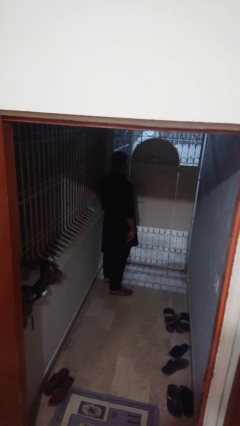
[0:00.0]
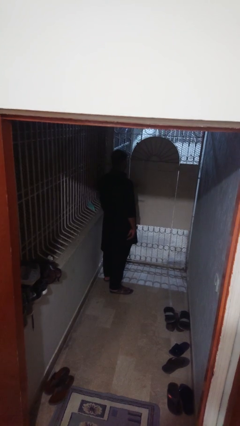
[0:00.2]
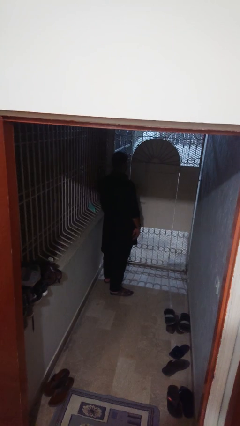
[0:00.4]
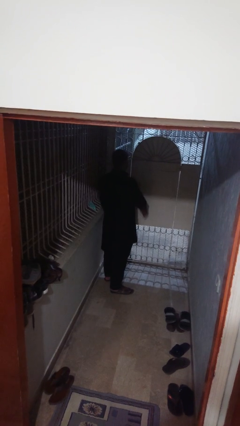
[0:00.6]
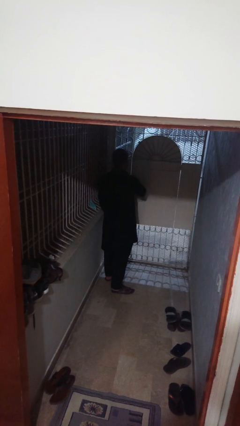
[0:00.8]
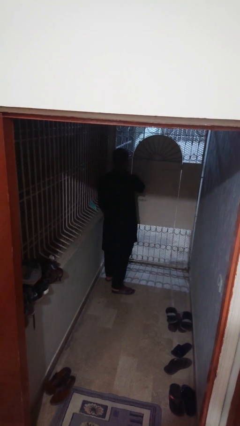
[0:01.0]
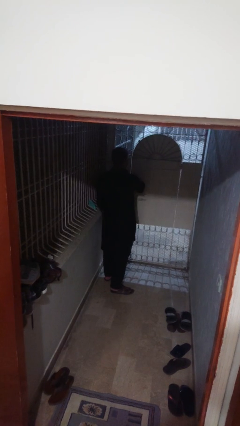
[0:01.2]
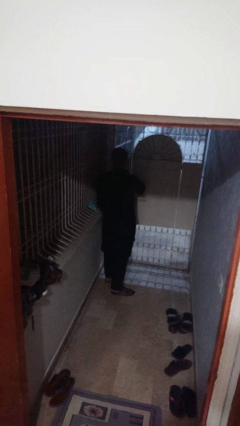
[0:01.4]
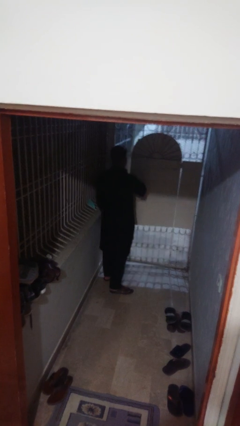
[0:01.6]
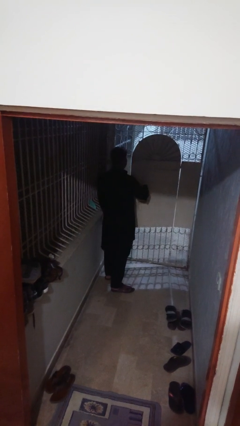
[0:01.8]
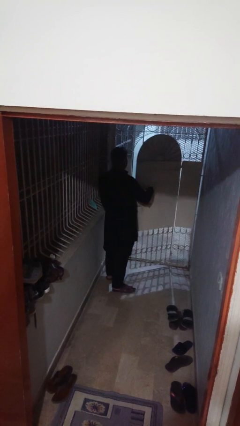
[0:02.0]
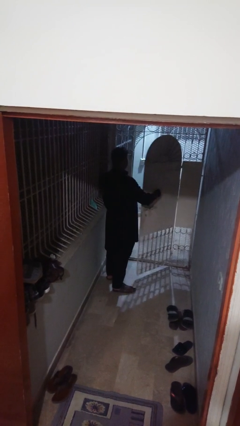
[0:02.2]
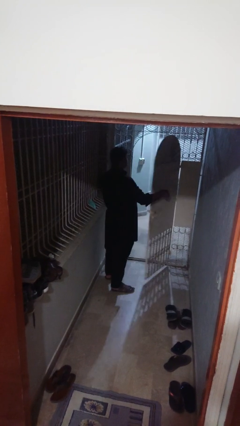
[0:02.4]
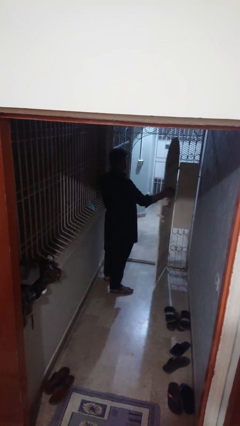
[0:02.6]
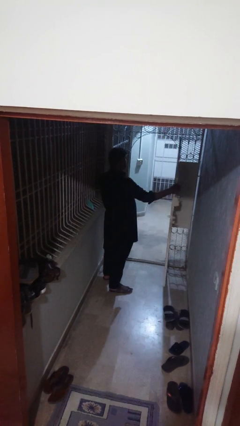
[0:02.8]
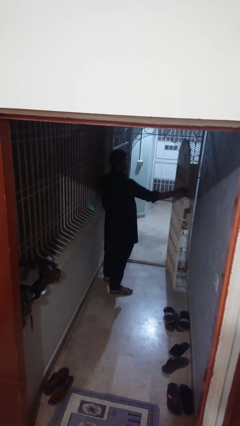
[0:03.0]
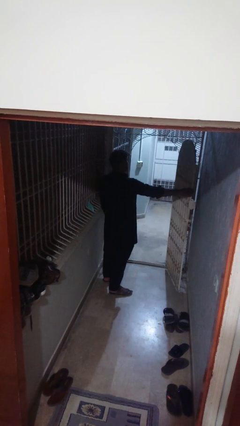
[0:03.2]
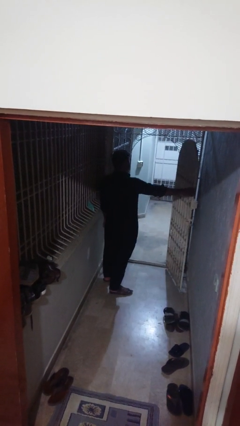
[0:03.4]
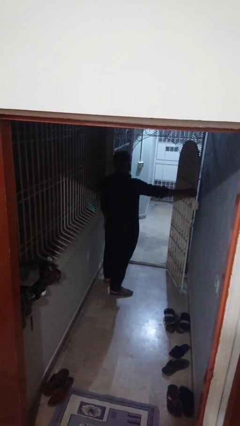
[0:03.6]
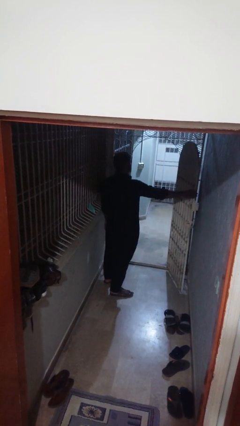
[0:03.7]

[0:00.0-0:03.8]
person opens gate

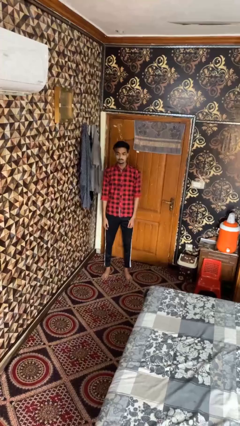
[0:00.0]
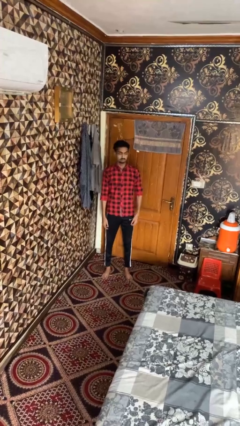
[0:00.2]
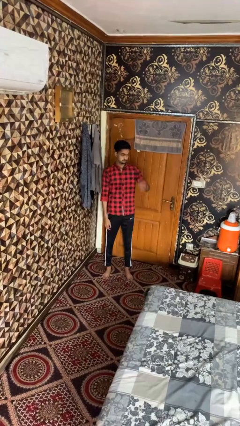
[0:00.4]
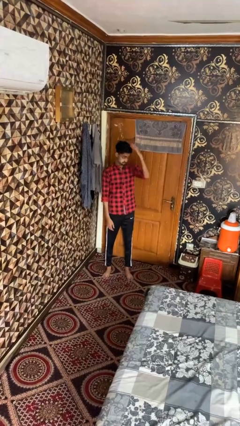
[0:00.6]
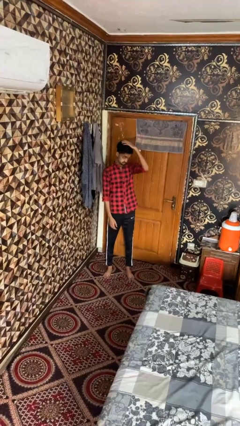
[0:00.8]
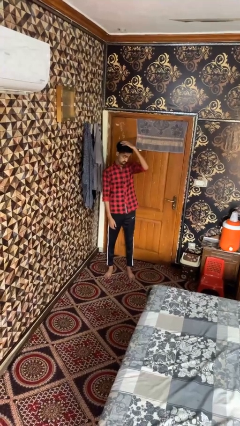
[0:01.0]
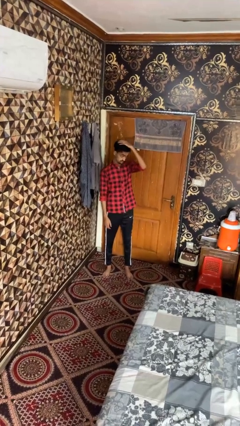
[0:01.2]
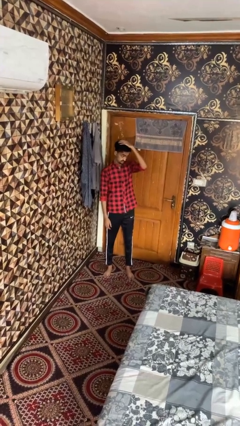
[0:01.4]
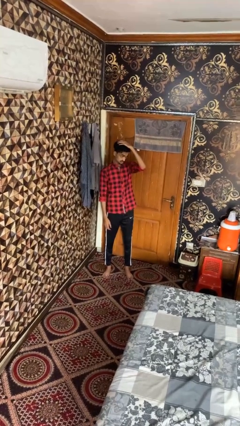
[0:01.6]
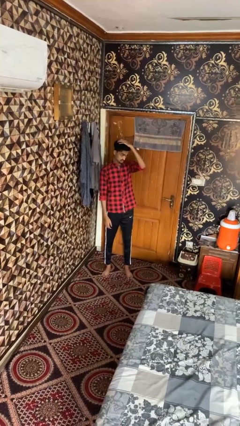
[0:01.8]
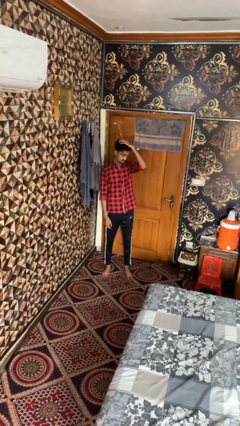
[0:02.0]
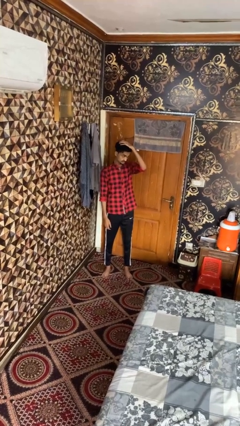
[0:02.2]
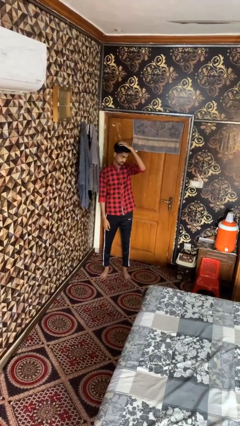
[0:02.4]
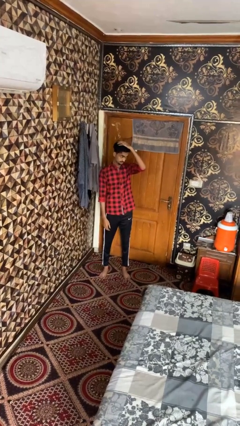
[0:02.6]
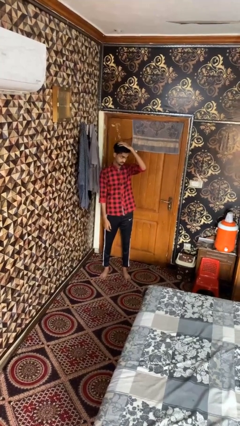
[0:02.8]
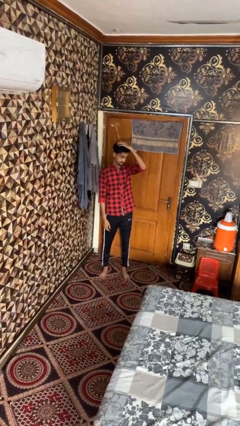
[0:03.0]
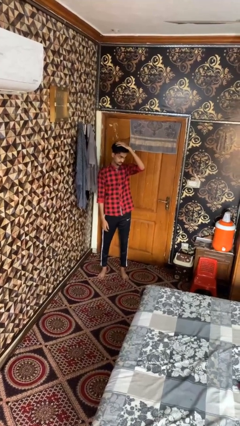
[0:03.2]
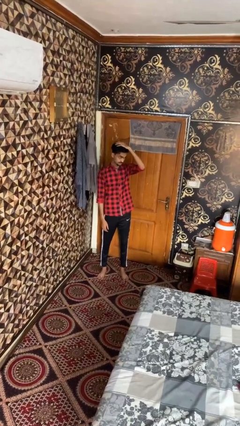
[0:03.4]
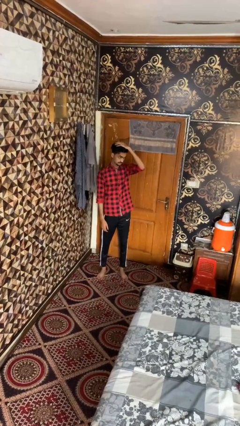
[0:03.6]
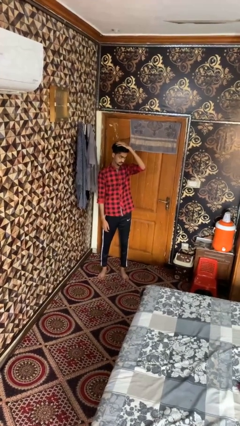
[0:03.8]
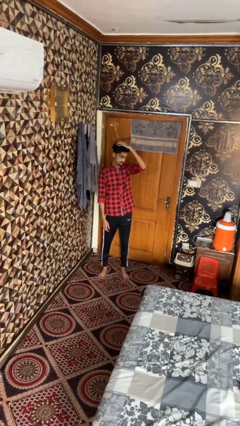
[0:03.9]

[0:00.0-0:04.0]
person pats head

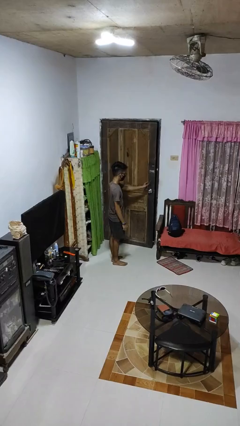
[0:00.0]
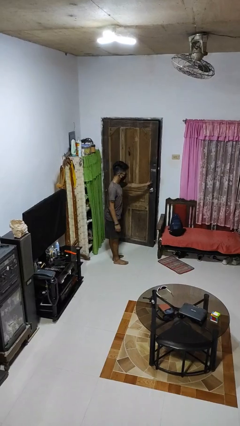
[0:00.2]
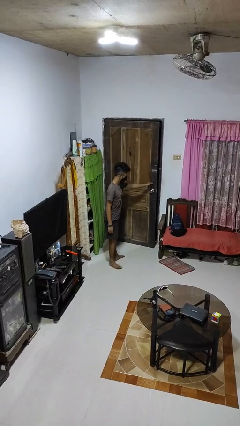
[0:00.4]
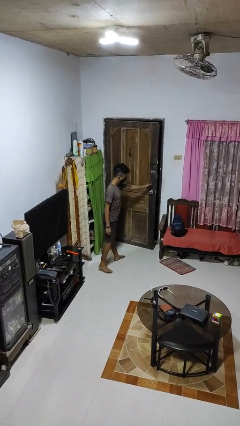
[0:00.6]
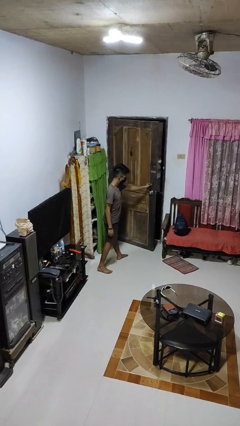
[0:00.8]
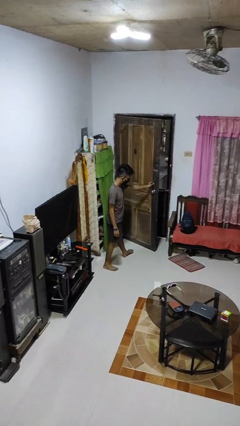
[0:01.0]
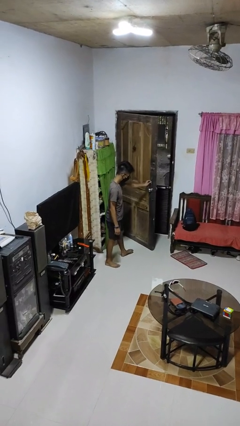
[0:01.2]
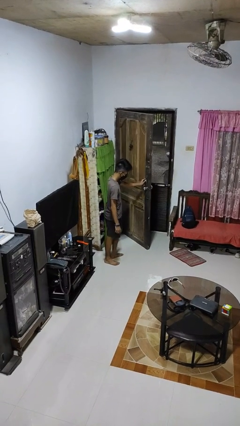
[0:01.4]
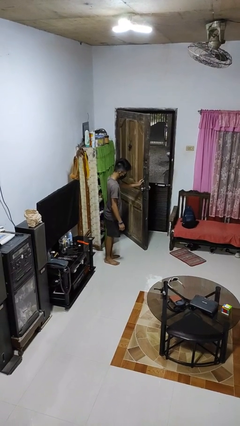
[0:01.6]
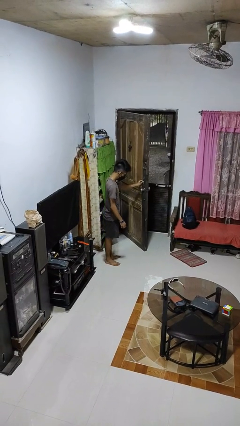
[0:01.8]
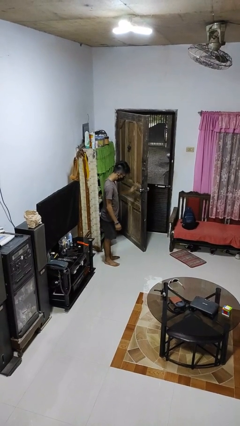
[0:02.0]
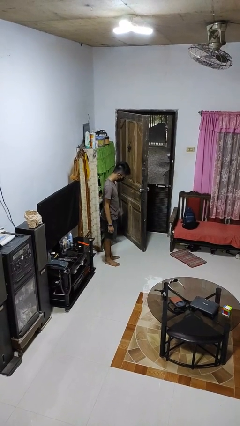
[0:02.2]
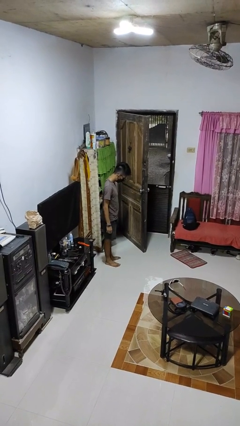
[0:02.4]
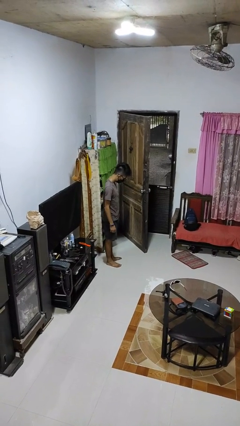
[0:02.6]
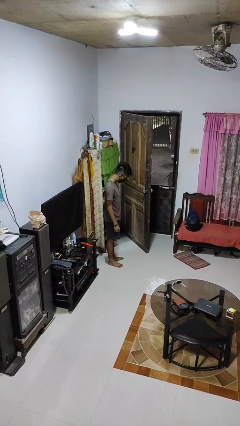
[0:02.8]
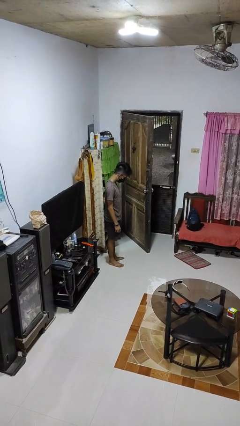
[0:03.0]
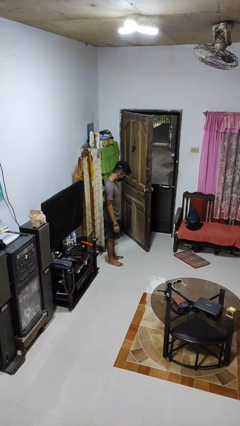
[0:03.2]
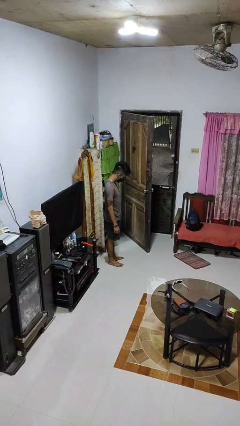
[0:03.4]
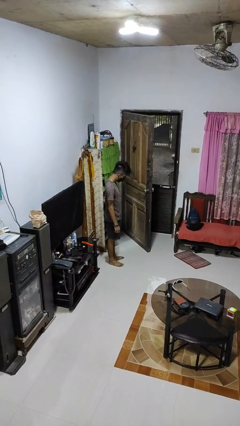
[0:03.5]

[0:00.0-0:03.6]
person opens facility door

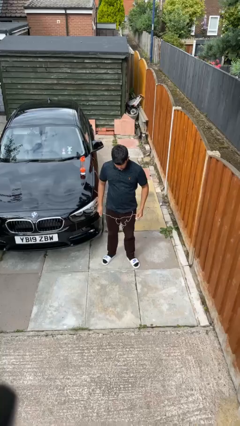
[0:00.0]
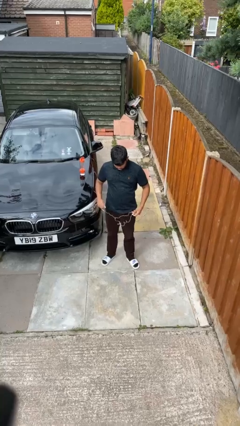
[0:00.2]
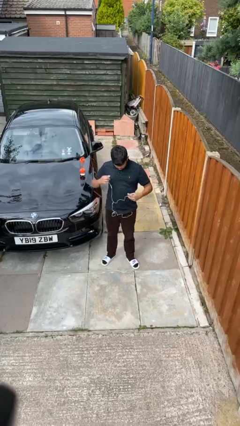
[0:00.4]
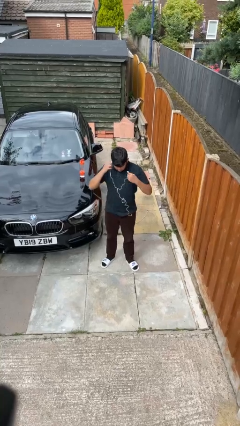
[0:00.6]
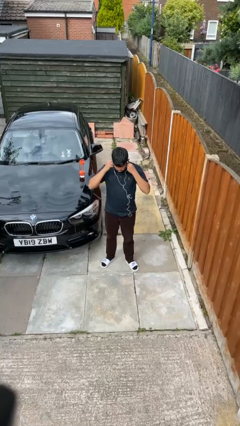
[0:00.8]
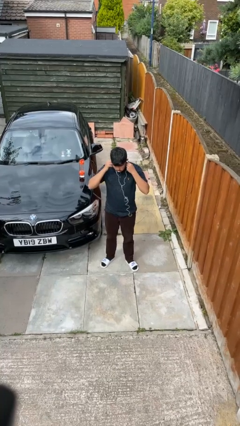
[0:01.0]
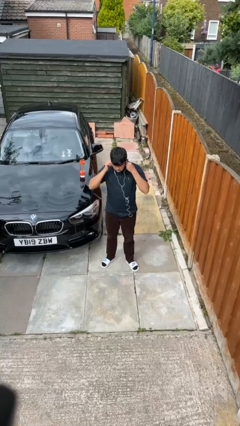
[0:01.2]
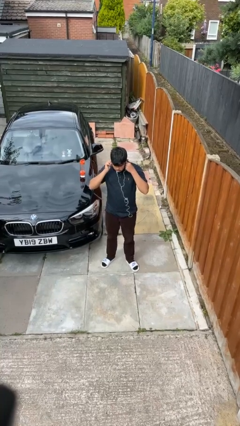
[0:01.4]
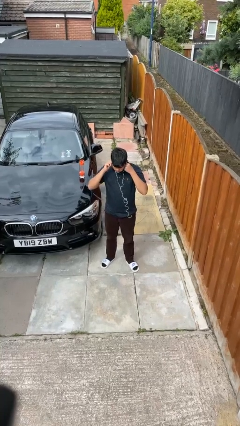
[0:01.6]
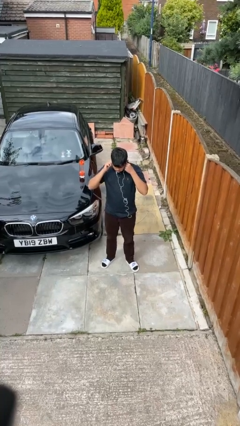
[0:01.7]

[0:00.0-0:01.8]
person puts on headphones

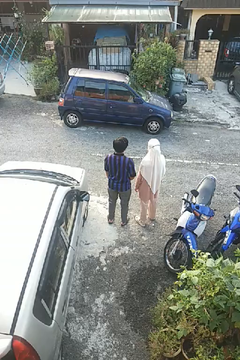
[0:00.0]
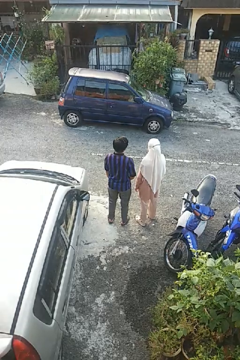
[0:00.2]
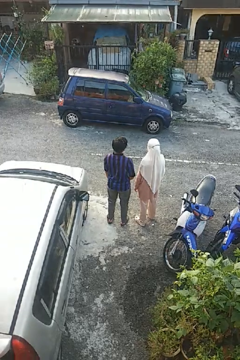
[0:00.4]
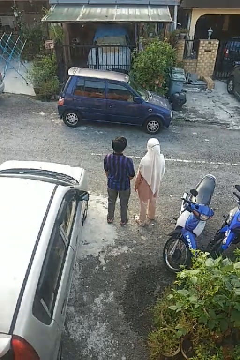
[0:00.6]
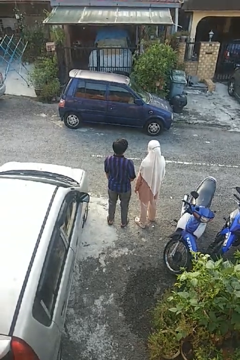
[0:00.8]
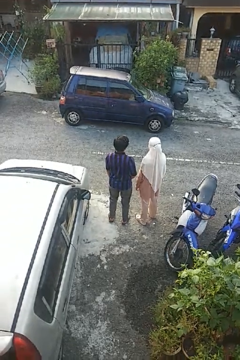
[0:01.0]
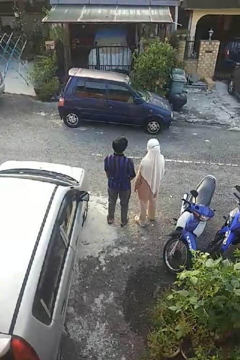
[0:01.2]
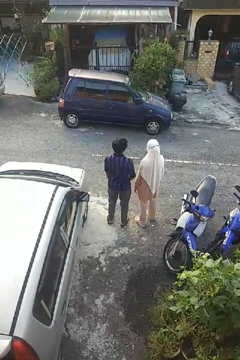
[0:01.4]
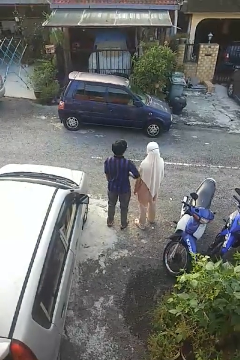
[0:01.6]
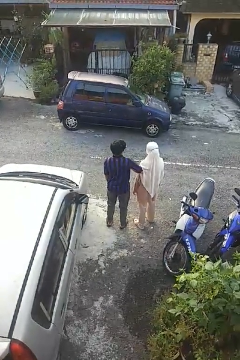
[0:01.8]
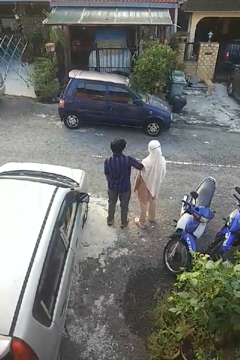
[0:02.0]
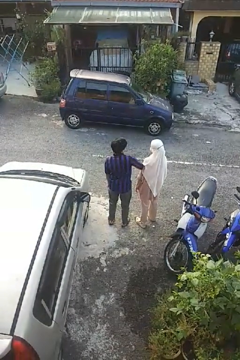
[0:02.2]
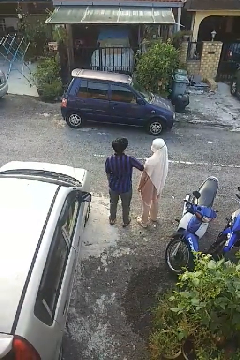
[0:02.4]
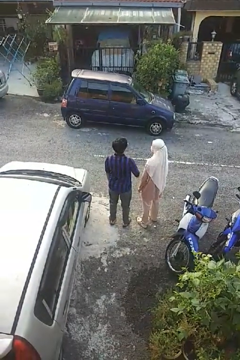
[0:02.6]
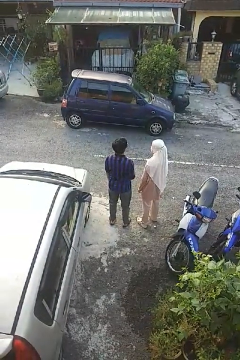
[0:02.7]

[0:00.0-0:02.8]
person nudges person with elbow

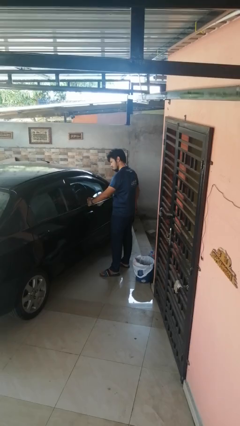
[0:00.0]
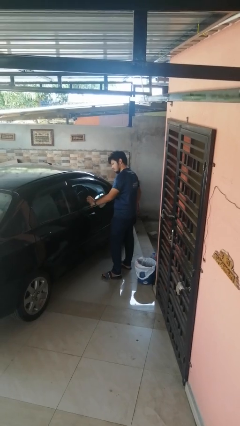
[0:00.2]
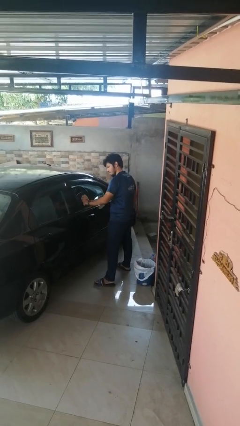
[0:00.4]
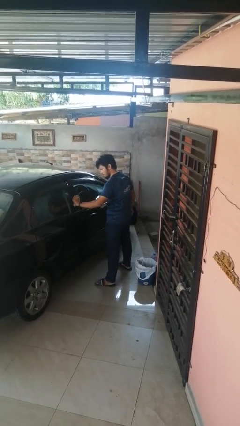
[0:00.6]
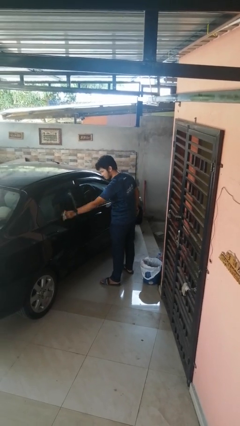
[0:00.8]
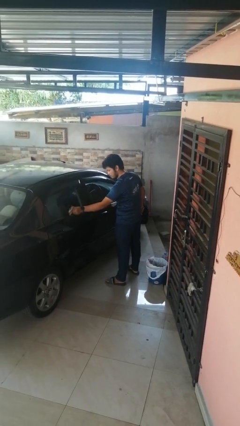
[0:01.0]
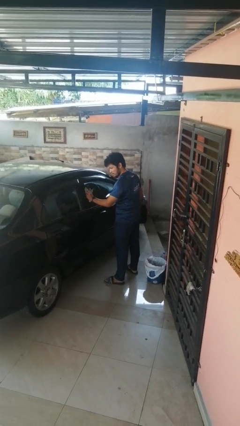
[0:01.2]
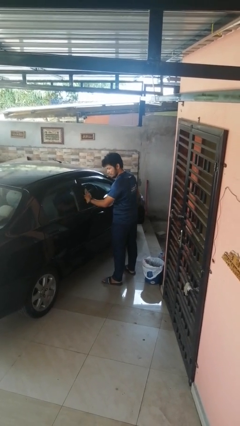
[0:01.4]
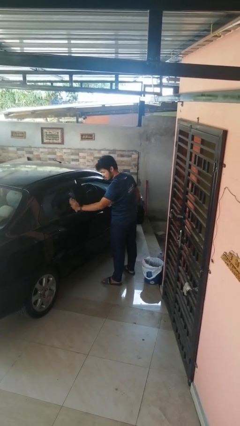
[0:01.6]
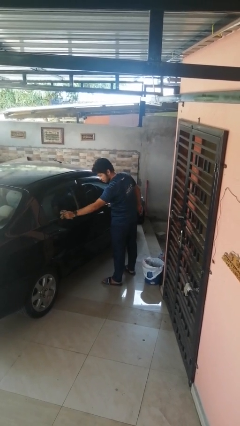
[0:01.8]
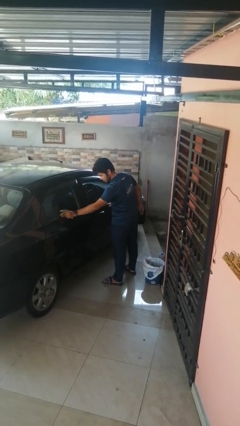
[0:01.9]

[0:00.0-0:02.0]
person polishes car with rag
